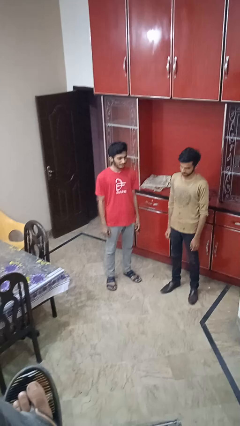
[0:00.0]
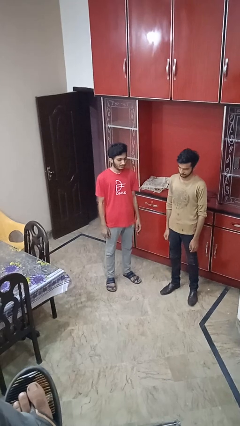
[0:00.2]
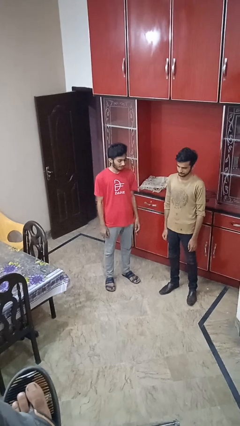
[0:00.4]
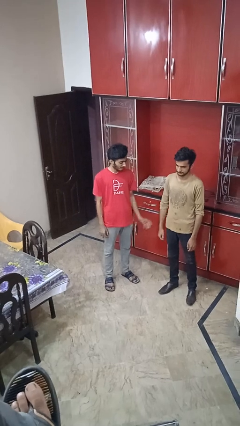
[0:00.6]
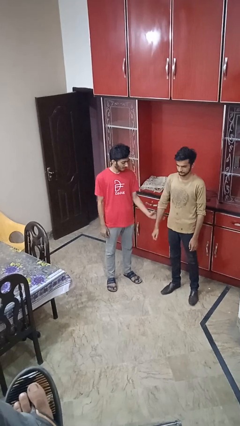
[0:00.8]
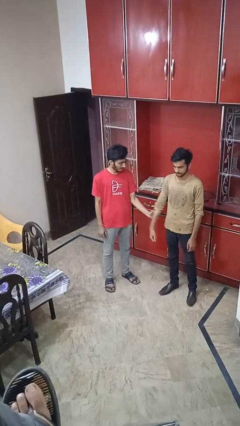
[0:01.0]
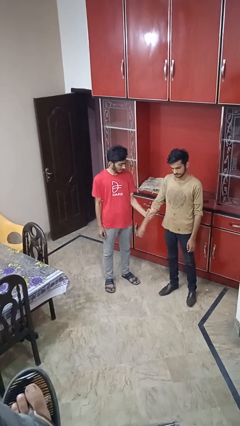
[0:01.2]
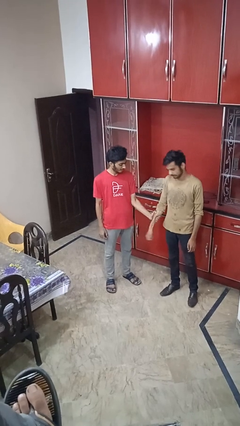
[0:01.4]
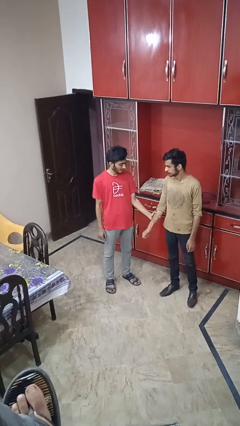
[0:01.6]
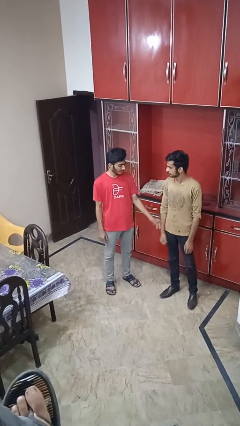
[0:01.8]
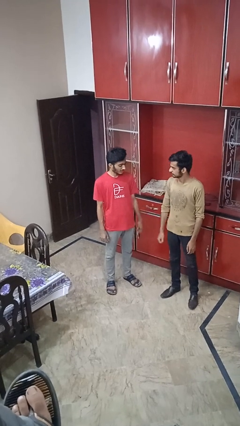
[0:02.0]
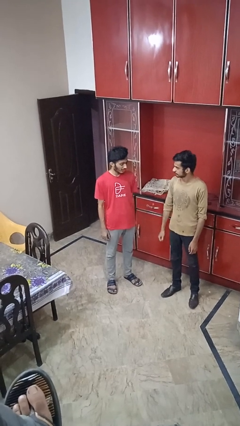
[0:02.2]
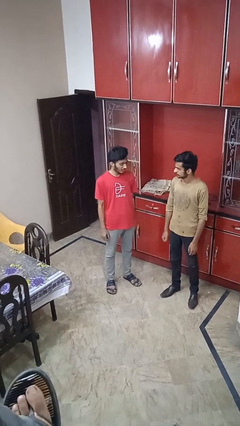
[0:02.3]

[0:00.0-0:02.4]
person grabs person by forearm

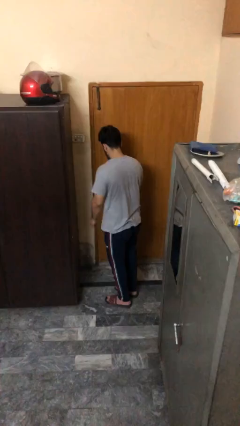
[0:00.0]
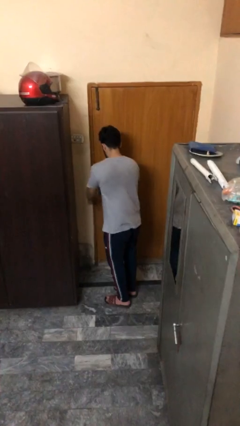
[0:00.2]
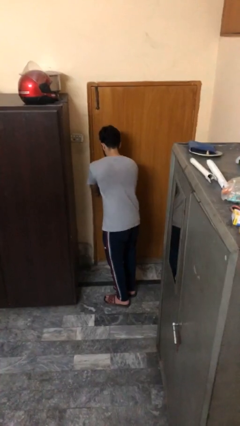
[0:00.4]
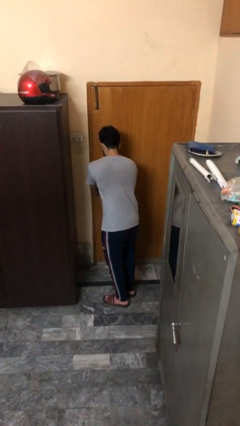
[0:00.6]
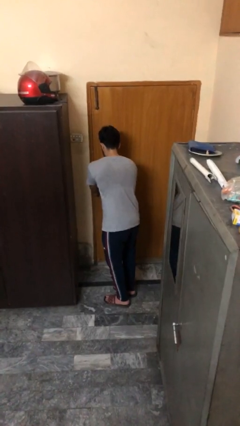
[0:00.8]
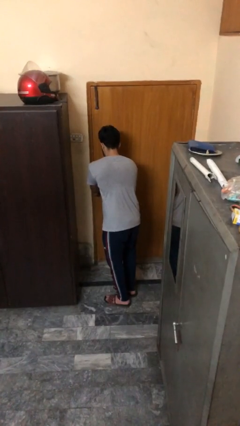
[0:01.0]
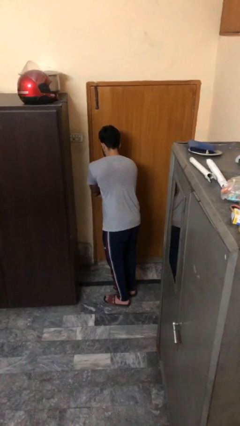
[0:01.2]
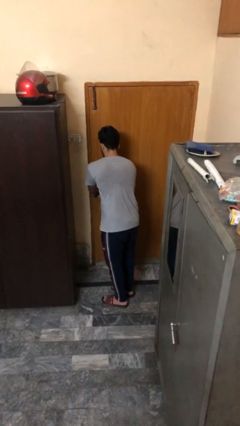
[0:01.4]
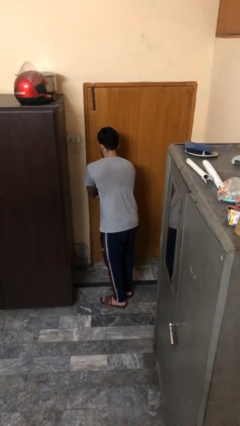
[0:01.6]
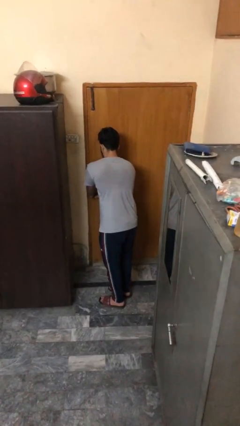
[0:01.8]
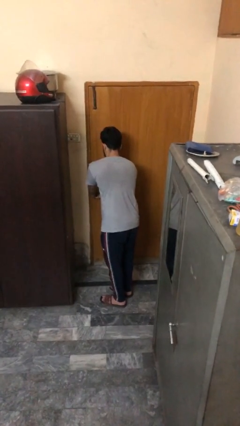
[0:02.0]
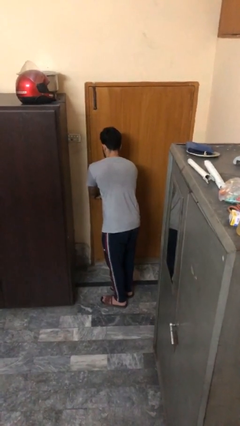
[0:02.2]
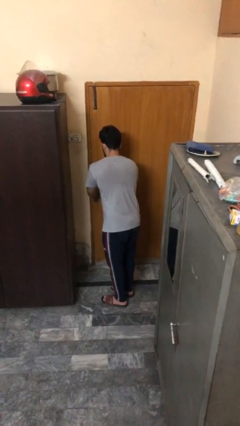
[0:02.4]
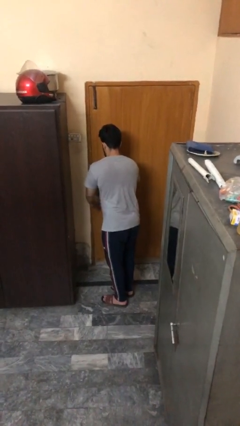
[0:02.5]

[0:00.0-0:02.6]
person locks door with keys

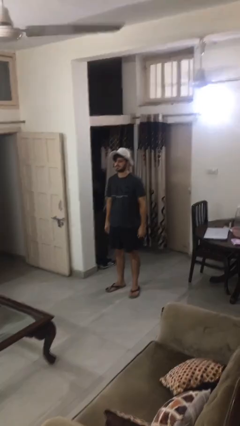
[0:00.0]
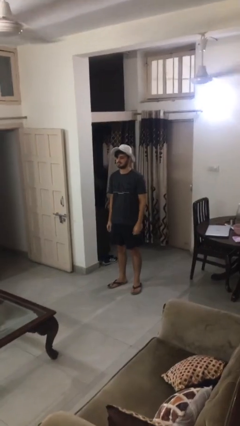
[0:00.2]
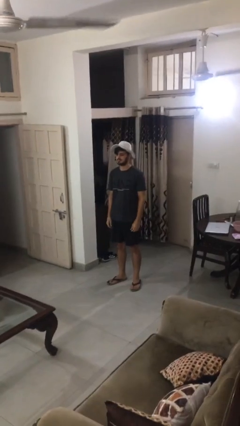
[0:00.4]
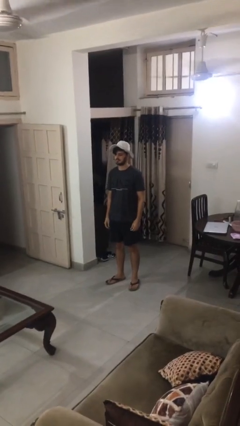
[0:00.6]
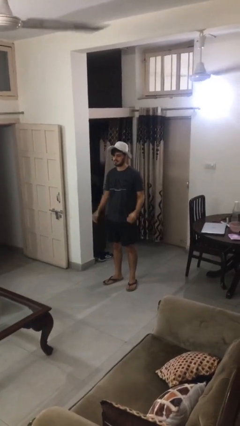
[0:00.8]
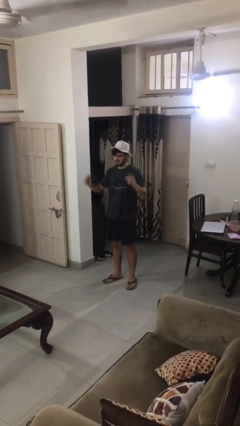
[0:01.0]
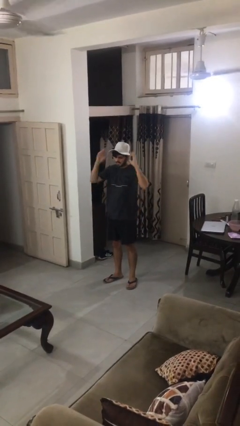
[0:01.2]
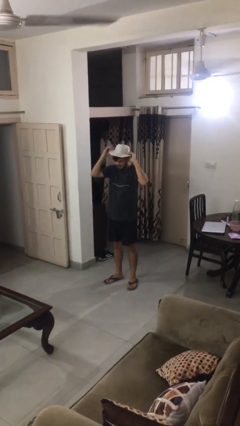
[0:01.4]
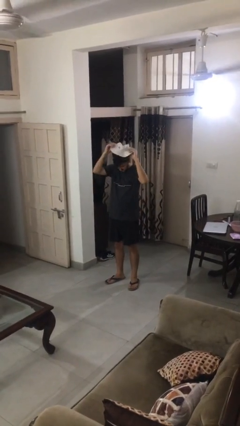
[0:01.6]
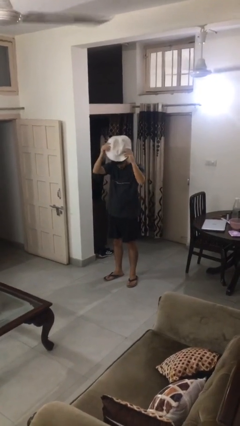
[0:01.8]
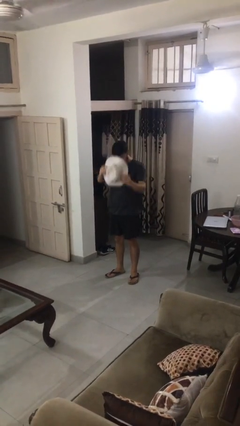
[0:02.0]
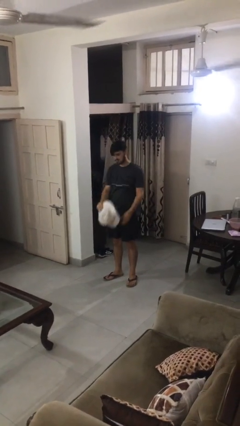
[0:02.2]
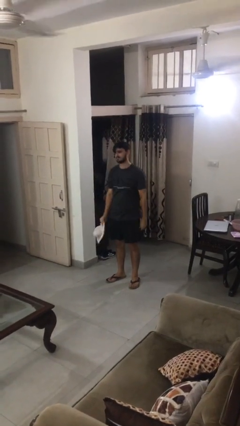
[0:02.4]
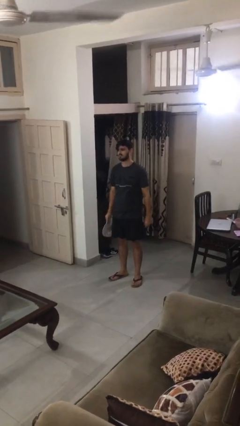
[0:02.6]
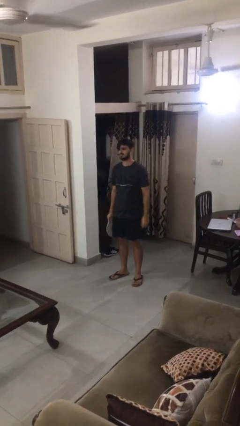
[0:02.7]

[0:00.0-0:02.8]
person takes off hat

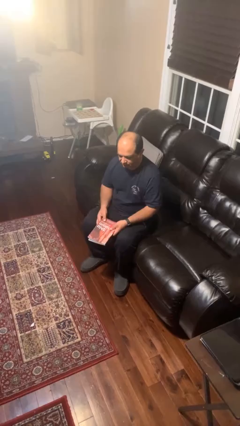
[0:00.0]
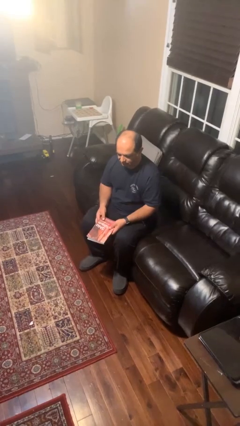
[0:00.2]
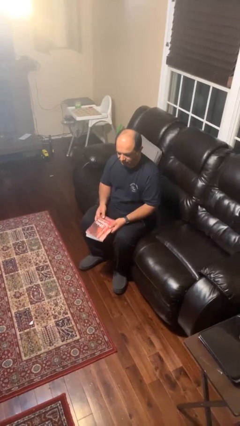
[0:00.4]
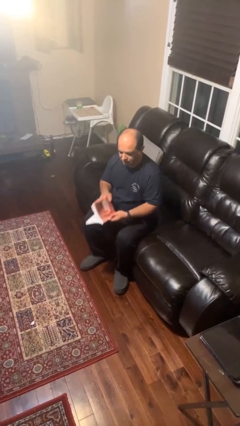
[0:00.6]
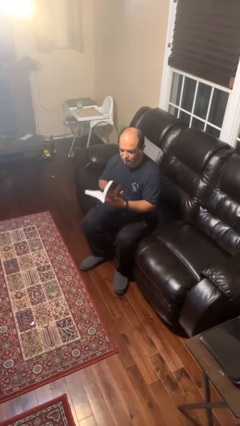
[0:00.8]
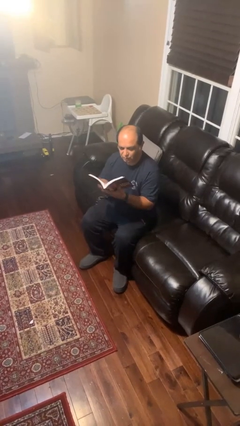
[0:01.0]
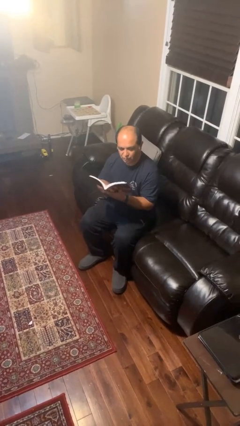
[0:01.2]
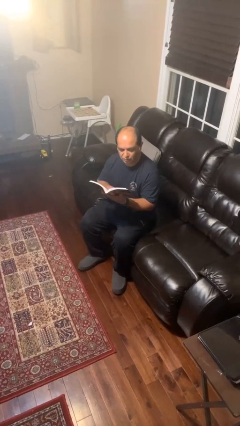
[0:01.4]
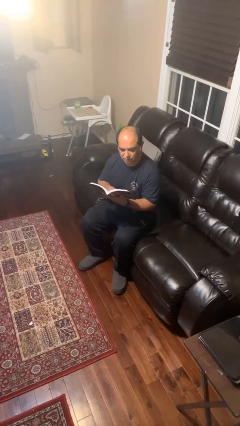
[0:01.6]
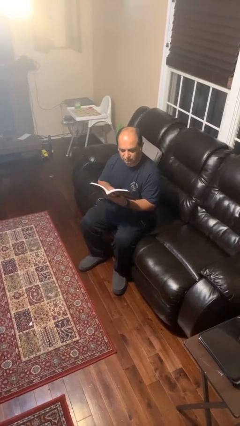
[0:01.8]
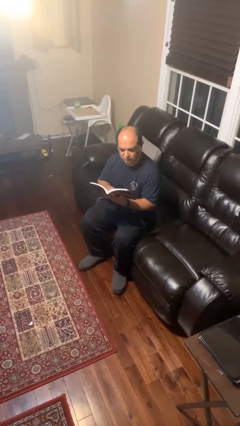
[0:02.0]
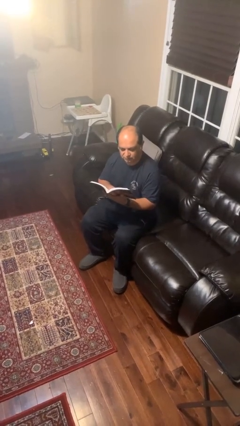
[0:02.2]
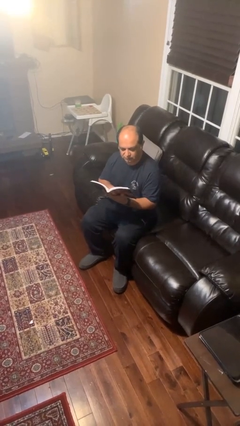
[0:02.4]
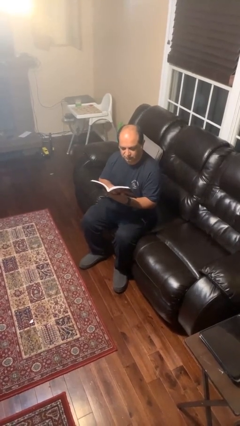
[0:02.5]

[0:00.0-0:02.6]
person reads document

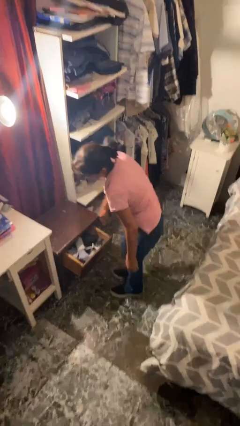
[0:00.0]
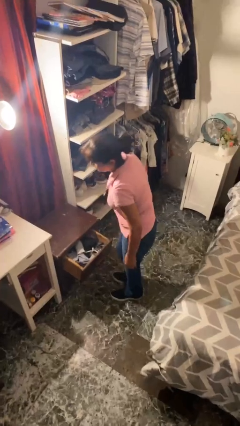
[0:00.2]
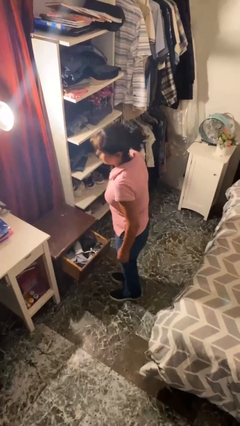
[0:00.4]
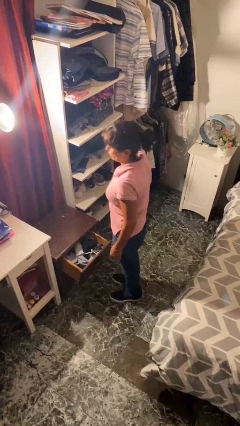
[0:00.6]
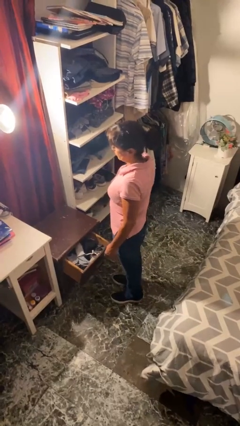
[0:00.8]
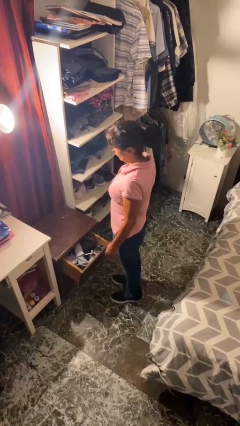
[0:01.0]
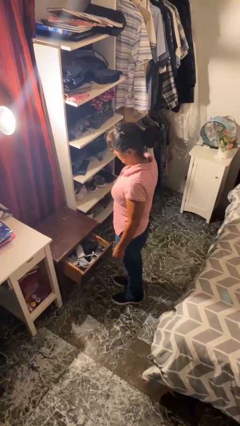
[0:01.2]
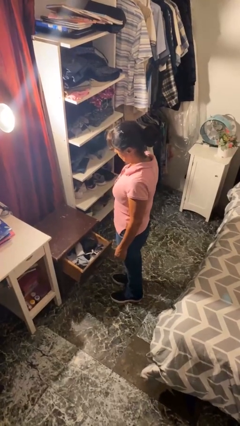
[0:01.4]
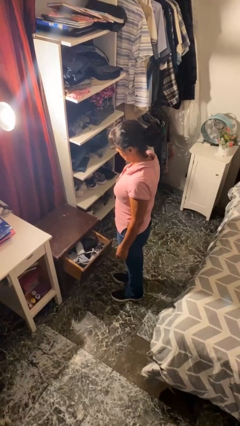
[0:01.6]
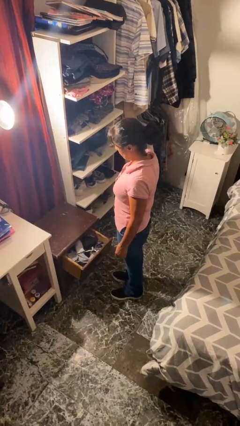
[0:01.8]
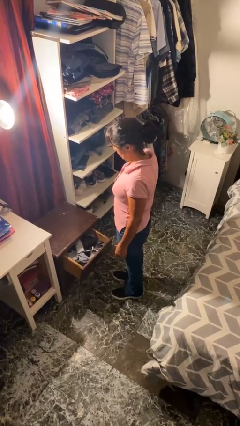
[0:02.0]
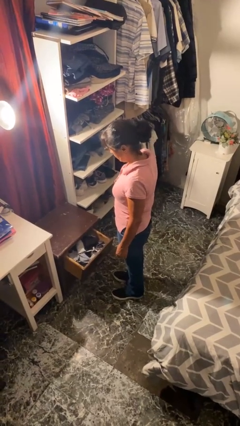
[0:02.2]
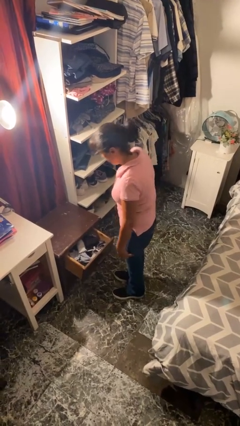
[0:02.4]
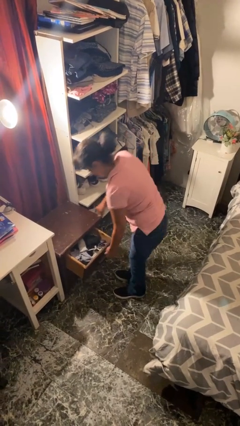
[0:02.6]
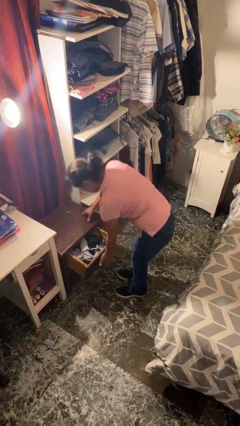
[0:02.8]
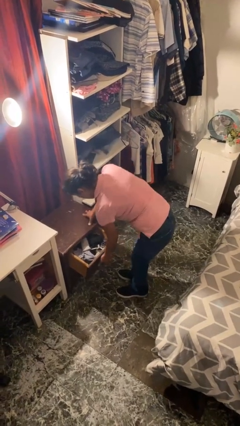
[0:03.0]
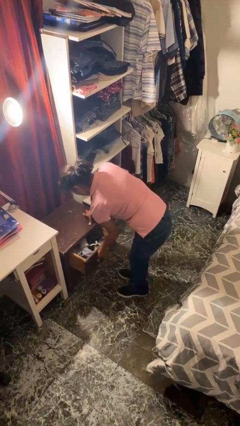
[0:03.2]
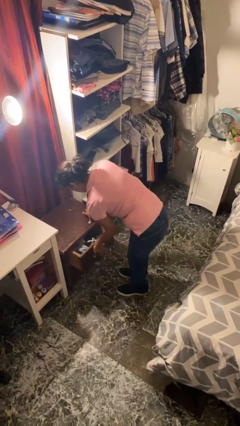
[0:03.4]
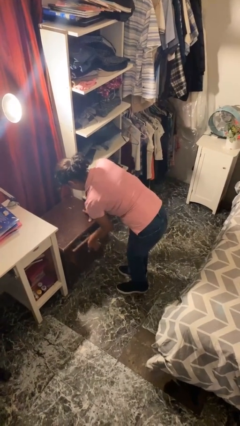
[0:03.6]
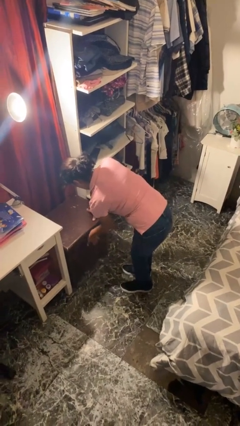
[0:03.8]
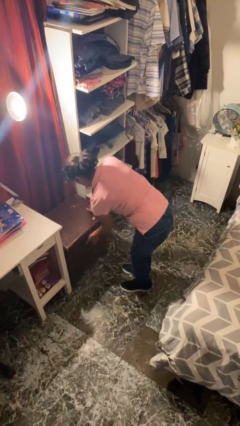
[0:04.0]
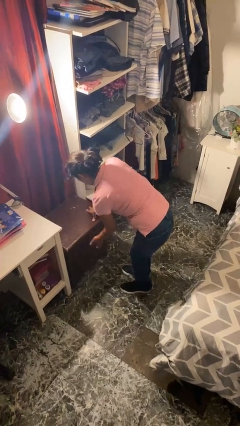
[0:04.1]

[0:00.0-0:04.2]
person closes dresser drawer

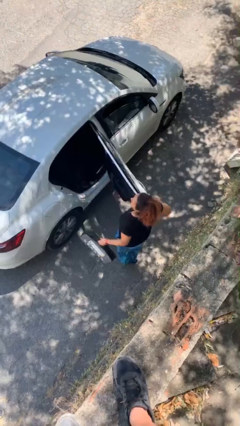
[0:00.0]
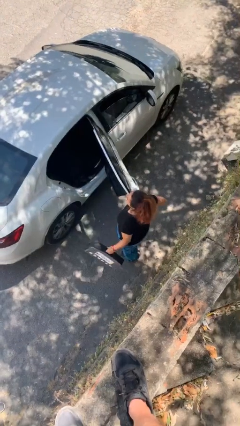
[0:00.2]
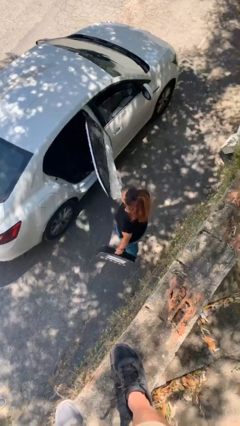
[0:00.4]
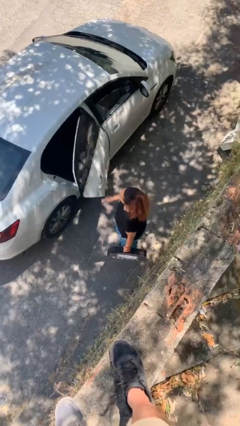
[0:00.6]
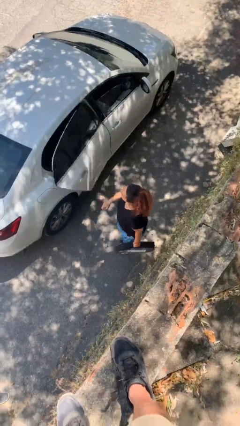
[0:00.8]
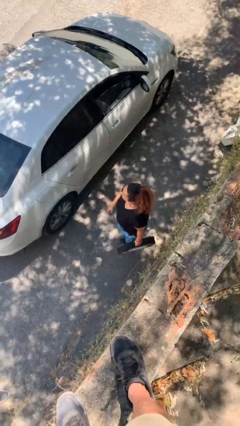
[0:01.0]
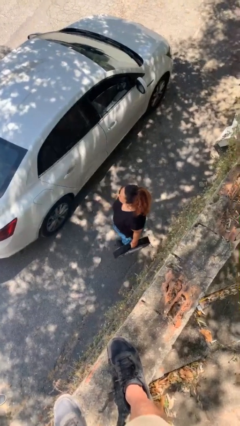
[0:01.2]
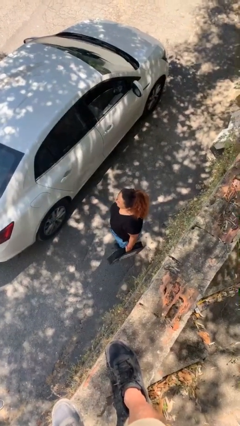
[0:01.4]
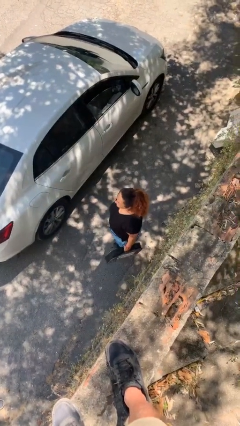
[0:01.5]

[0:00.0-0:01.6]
person closes car door

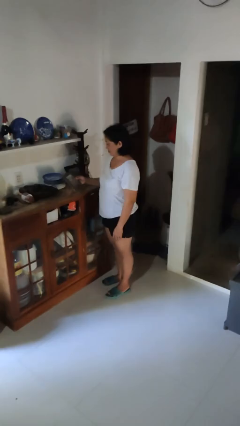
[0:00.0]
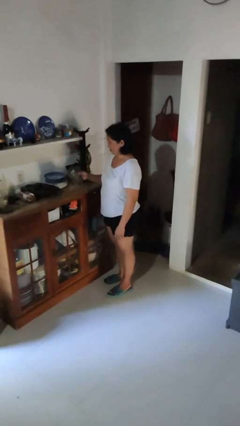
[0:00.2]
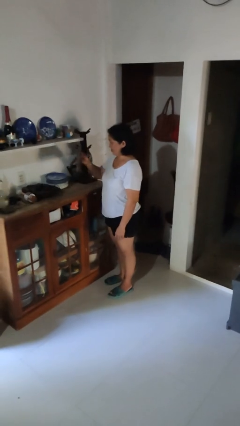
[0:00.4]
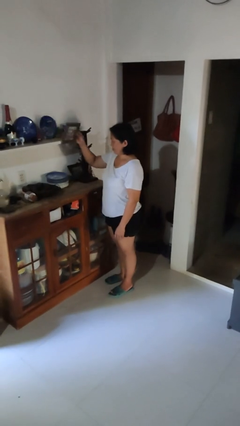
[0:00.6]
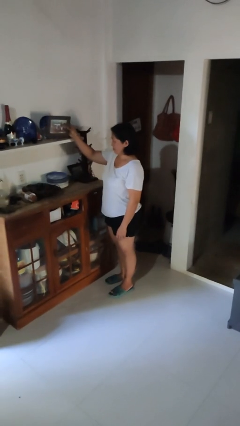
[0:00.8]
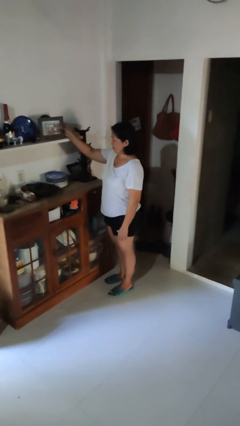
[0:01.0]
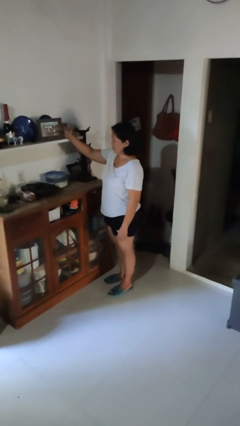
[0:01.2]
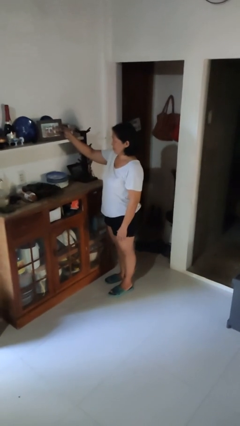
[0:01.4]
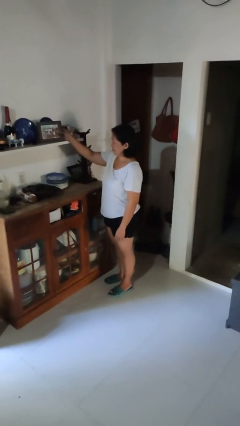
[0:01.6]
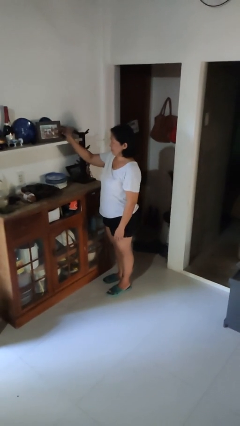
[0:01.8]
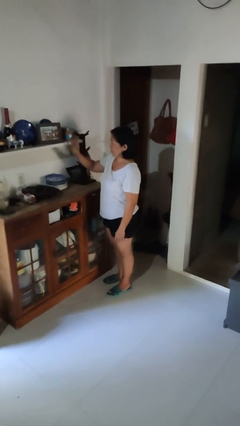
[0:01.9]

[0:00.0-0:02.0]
person puts down object on shelf
